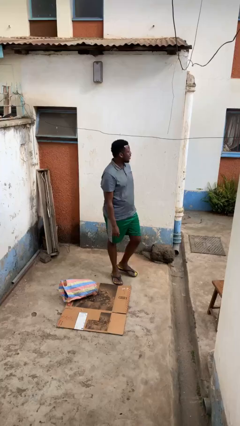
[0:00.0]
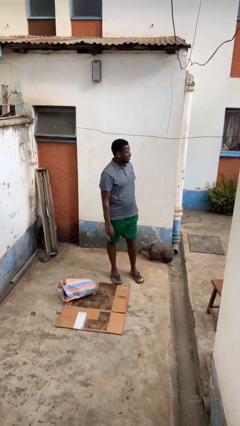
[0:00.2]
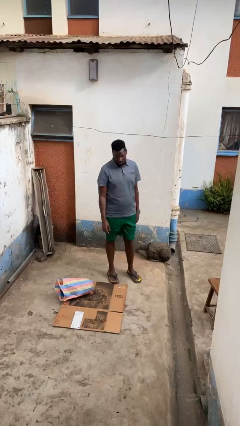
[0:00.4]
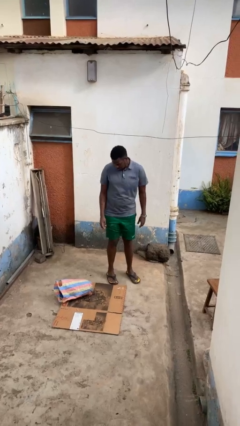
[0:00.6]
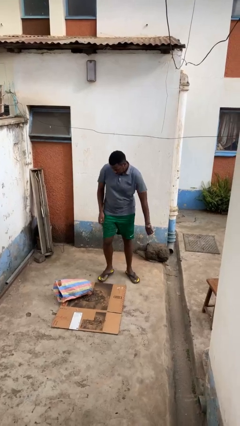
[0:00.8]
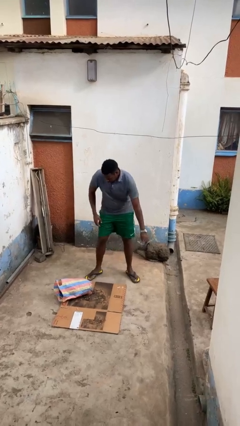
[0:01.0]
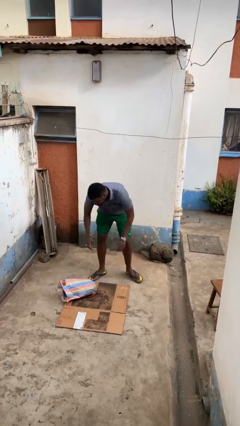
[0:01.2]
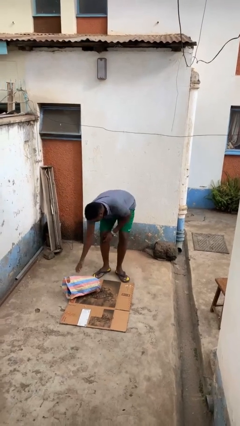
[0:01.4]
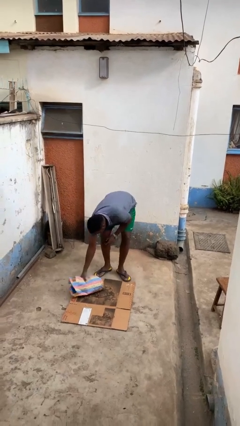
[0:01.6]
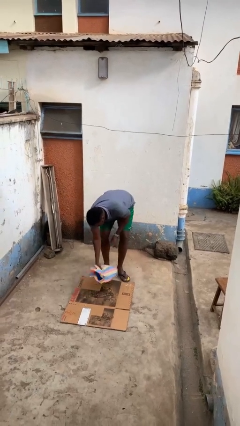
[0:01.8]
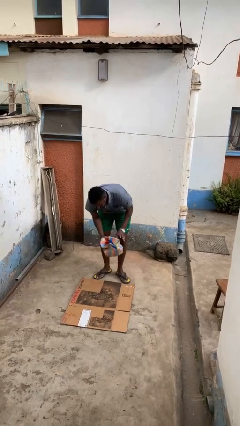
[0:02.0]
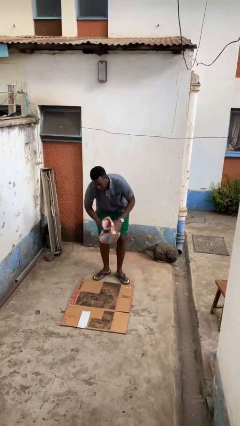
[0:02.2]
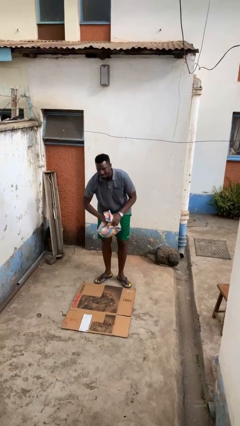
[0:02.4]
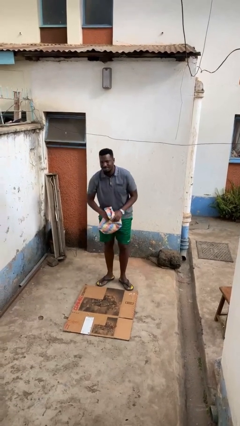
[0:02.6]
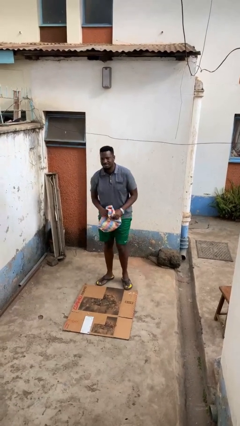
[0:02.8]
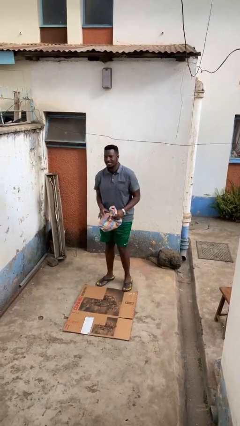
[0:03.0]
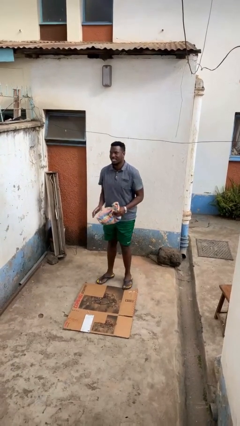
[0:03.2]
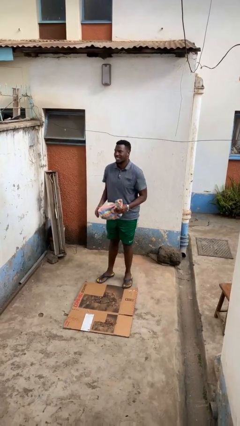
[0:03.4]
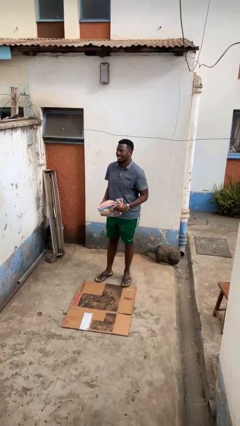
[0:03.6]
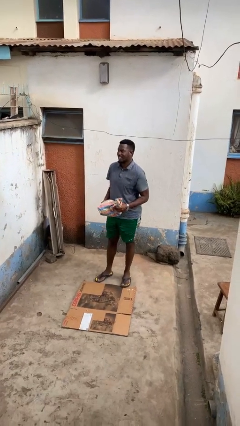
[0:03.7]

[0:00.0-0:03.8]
person picks up object from floor

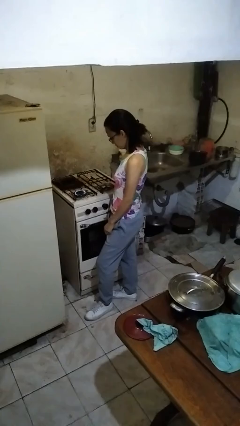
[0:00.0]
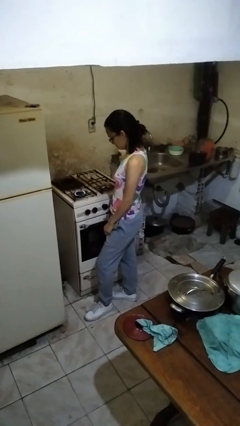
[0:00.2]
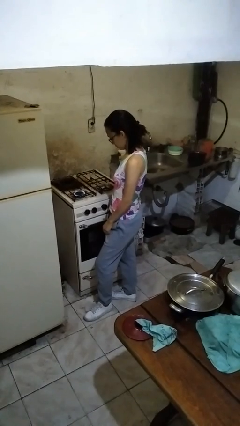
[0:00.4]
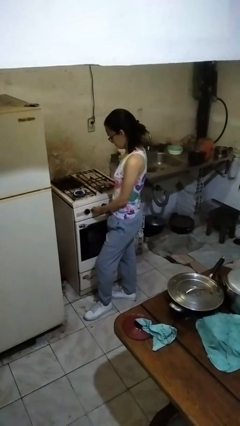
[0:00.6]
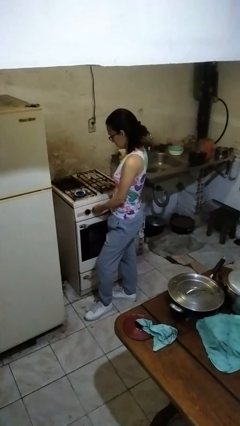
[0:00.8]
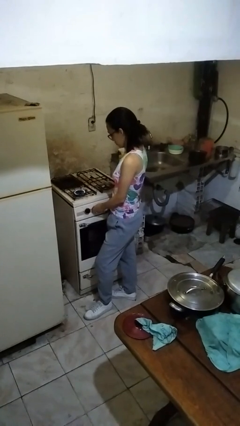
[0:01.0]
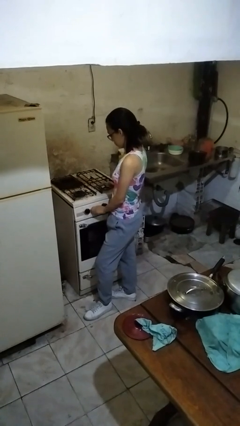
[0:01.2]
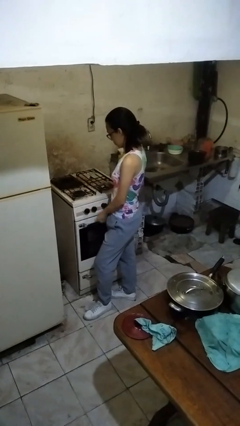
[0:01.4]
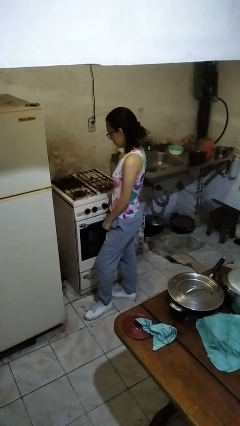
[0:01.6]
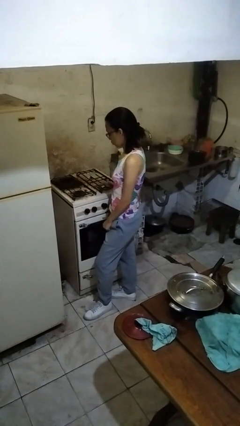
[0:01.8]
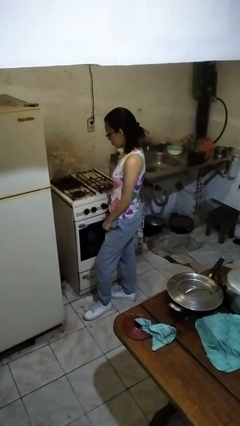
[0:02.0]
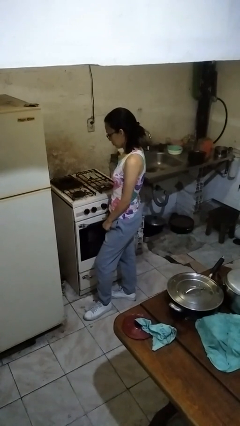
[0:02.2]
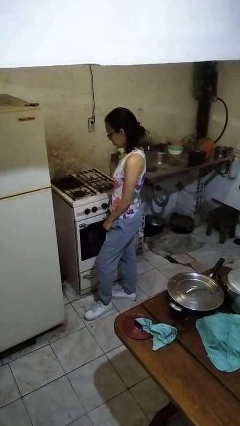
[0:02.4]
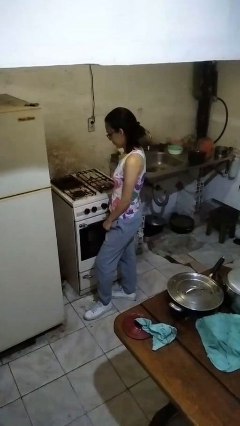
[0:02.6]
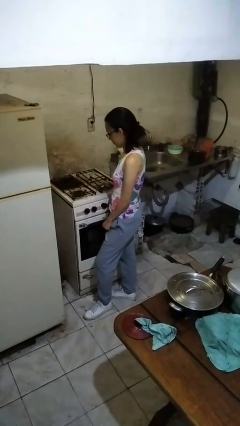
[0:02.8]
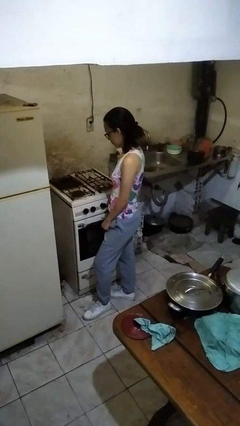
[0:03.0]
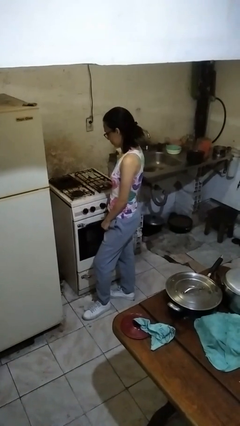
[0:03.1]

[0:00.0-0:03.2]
person turns off stovetop

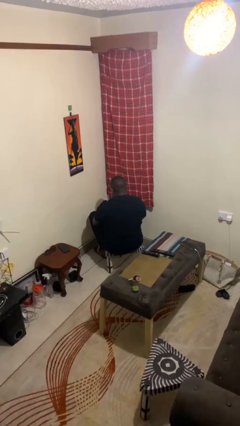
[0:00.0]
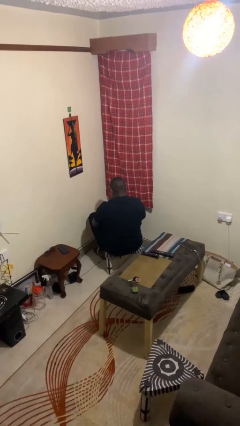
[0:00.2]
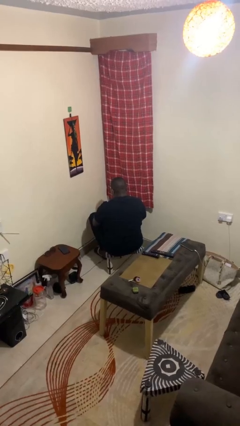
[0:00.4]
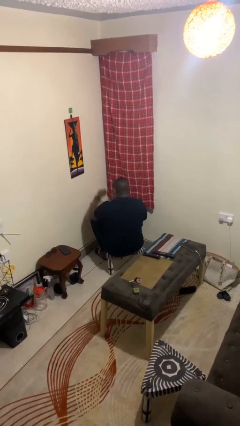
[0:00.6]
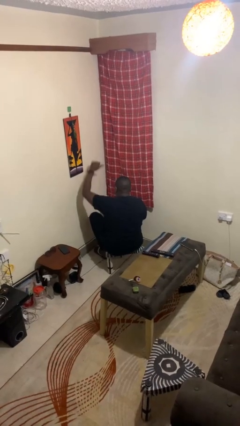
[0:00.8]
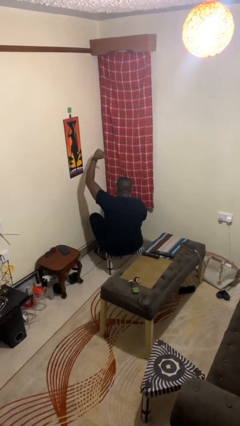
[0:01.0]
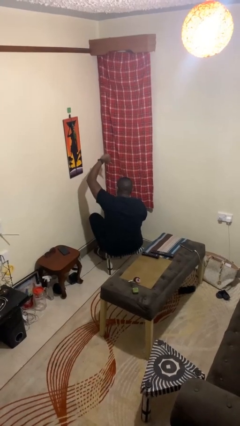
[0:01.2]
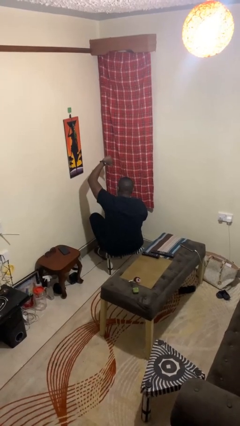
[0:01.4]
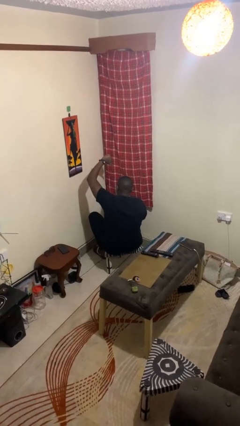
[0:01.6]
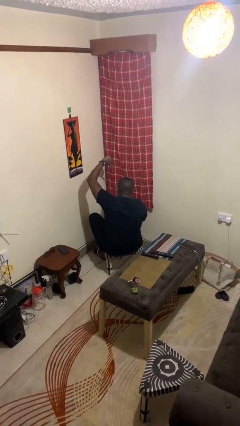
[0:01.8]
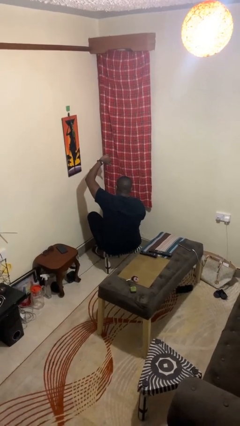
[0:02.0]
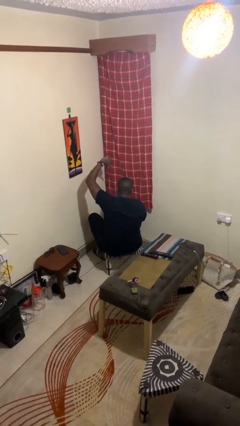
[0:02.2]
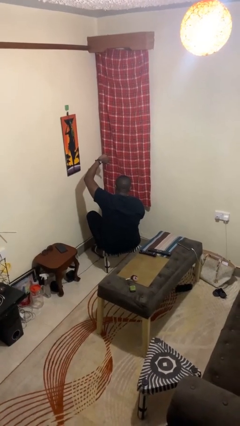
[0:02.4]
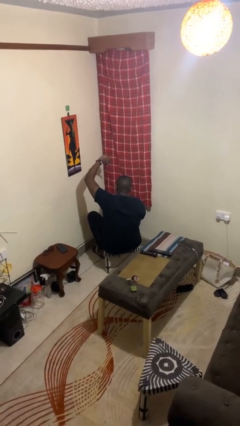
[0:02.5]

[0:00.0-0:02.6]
person gestures thumbs down

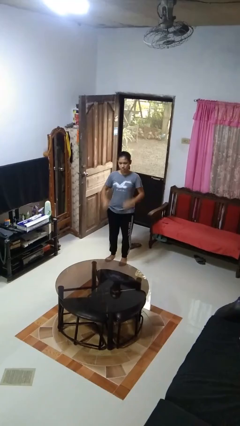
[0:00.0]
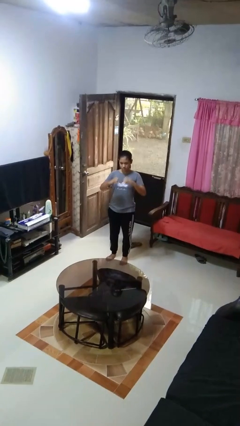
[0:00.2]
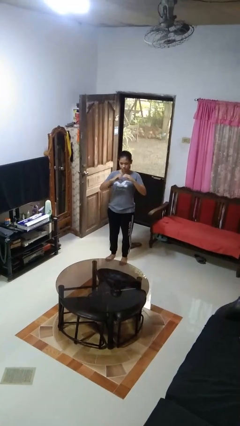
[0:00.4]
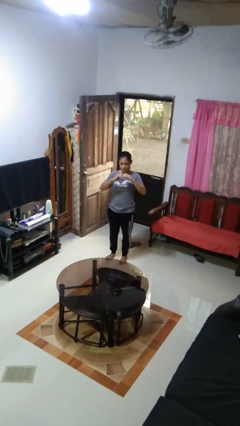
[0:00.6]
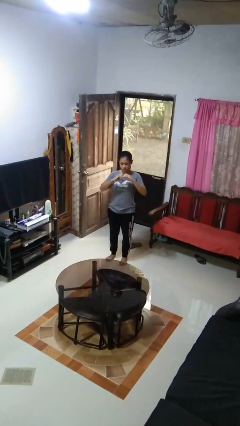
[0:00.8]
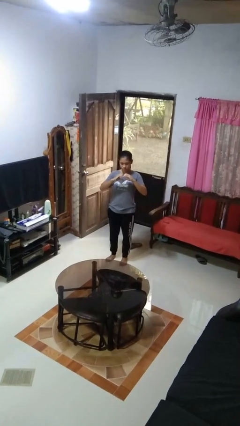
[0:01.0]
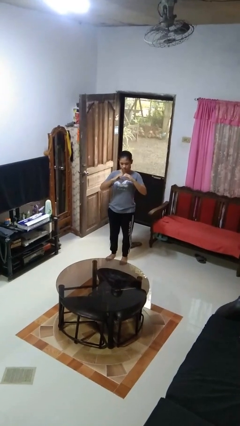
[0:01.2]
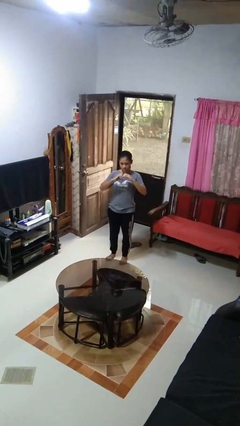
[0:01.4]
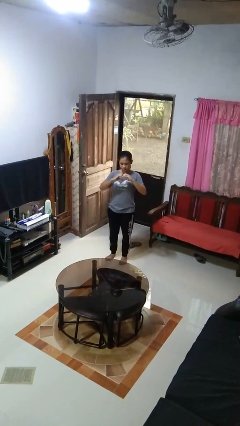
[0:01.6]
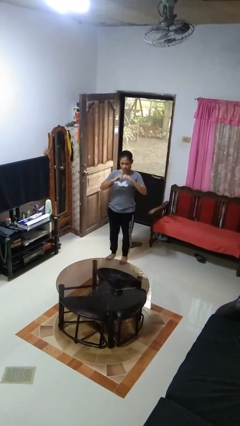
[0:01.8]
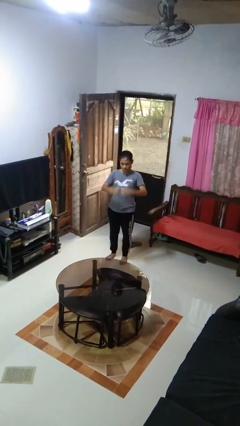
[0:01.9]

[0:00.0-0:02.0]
person gestures heart

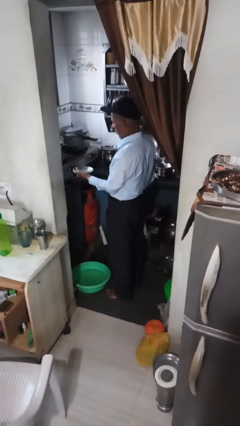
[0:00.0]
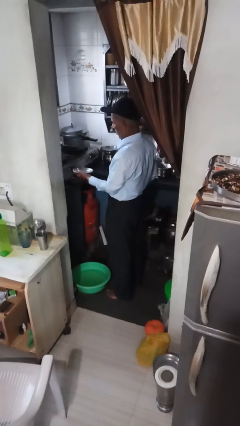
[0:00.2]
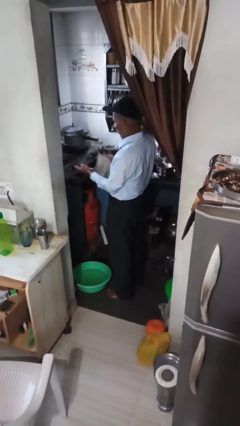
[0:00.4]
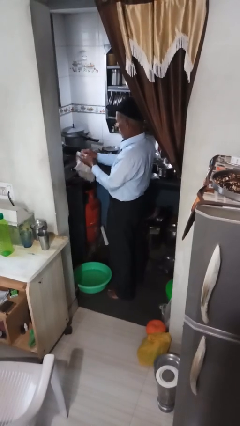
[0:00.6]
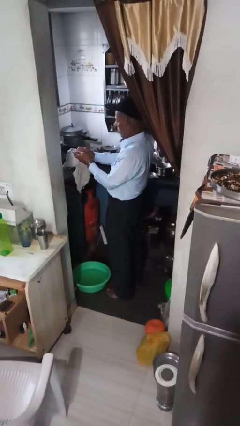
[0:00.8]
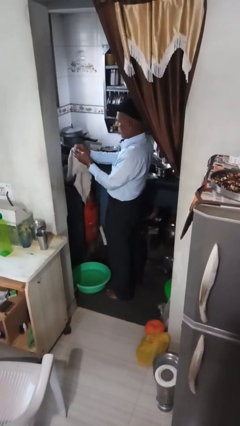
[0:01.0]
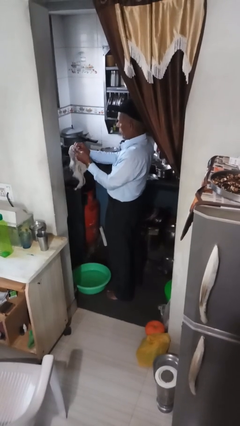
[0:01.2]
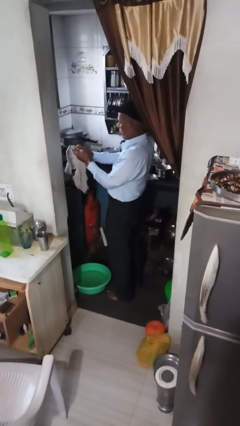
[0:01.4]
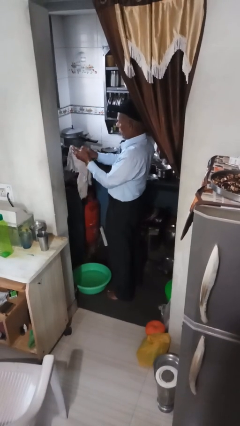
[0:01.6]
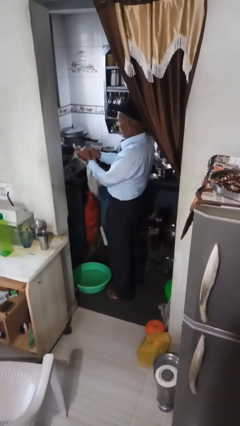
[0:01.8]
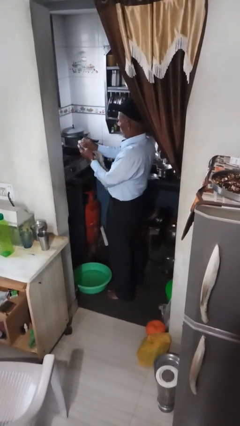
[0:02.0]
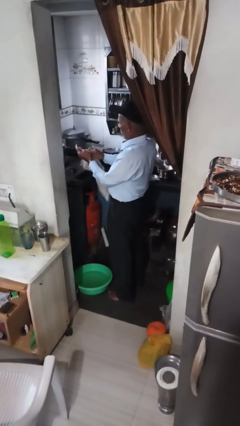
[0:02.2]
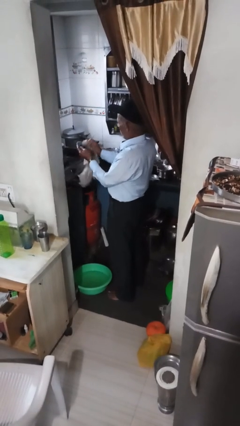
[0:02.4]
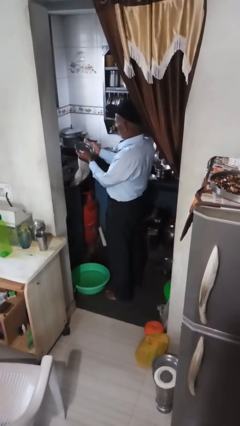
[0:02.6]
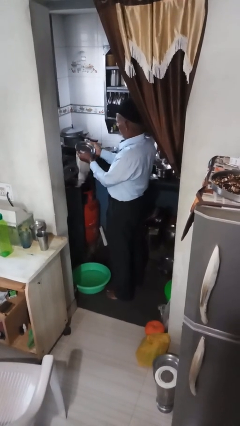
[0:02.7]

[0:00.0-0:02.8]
person dries dish

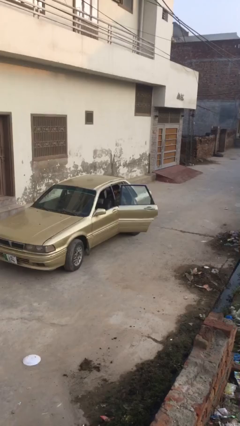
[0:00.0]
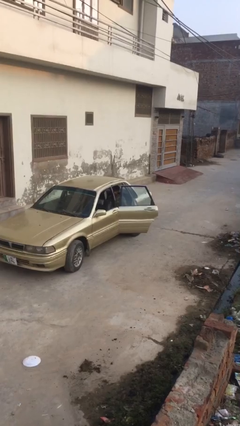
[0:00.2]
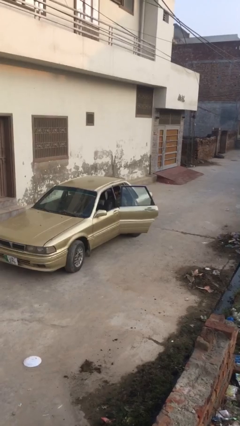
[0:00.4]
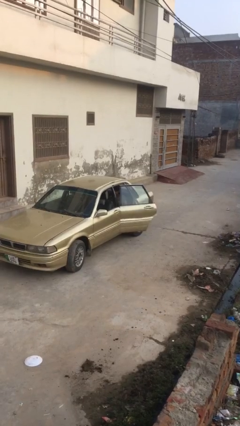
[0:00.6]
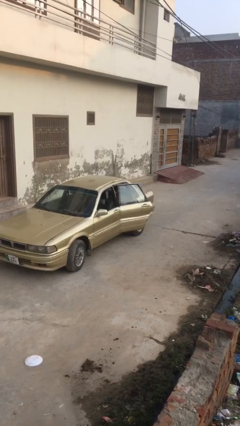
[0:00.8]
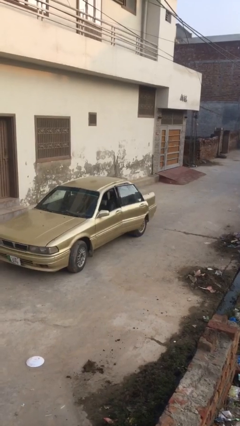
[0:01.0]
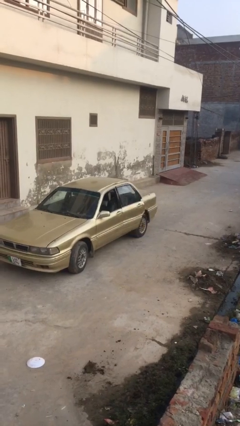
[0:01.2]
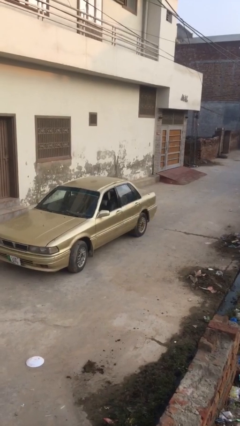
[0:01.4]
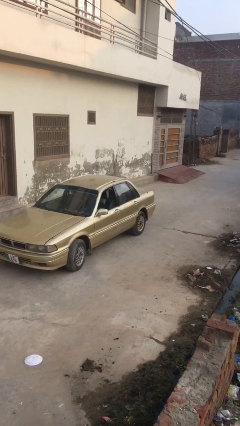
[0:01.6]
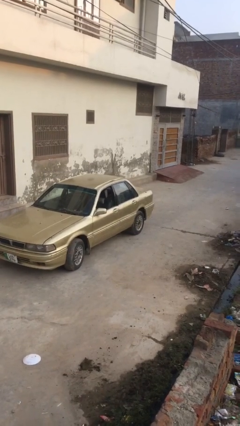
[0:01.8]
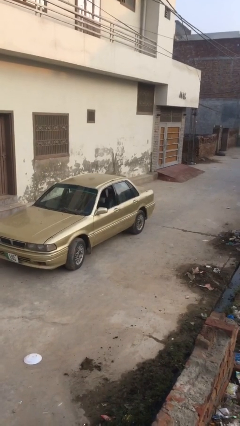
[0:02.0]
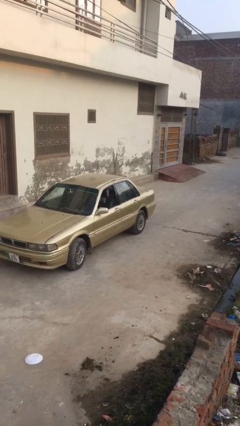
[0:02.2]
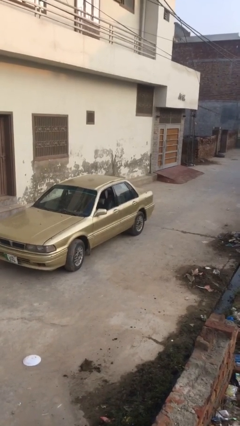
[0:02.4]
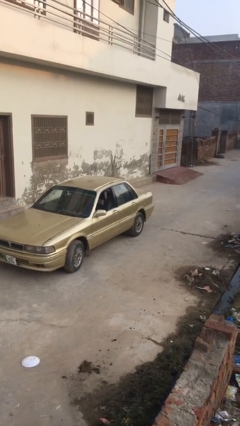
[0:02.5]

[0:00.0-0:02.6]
person closes car door
